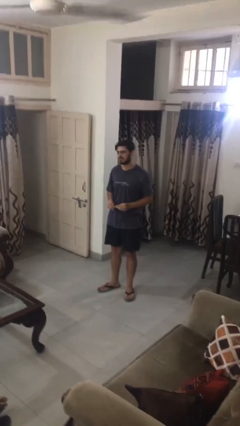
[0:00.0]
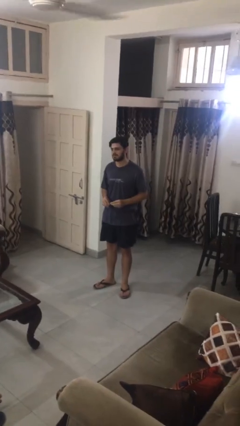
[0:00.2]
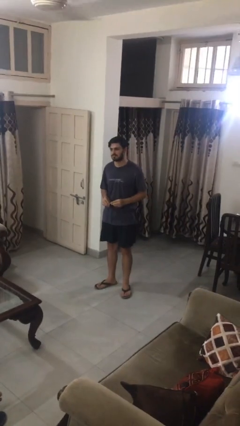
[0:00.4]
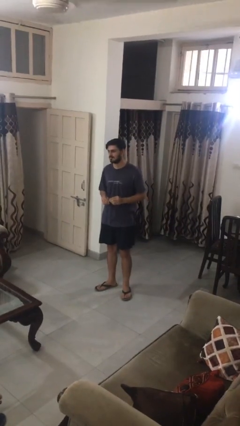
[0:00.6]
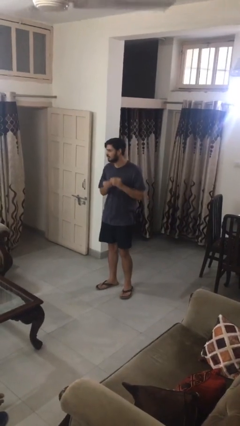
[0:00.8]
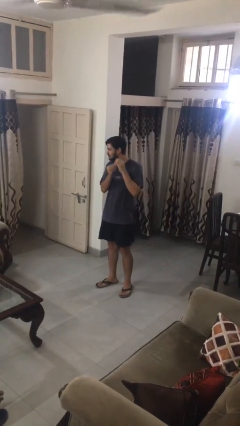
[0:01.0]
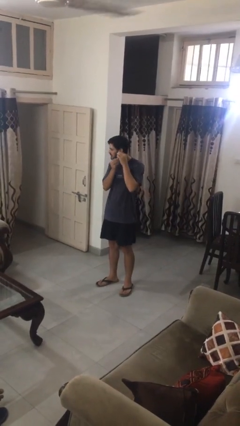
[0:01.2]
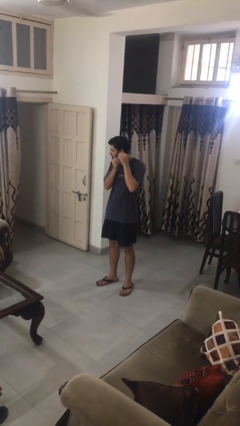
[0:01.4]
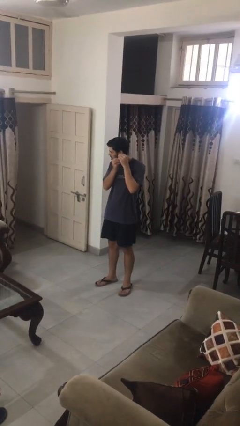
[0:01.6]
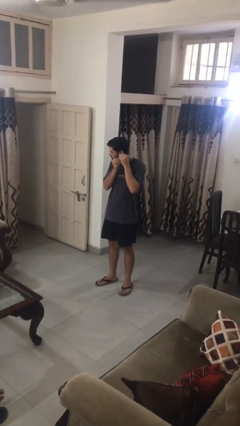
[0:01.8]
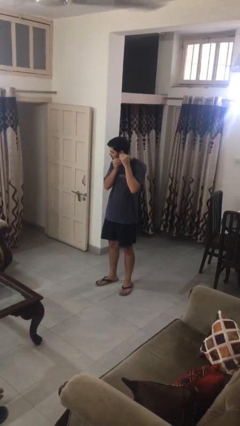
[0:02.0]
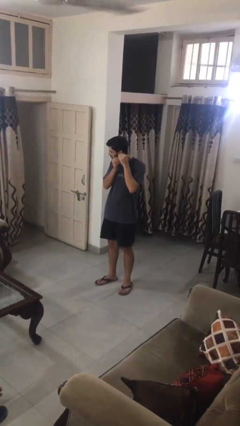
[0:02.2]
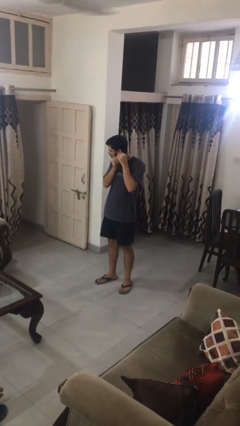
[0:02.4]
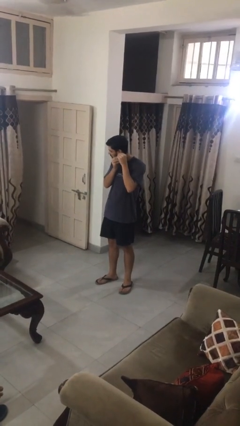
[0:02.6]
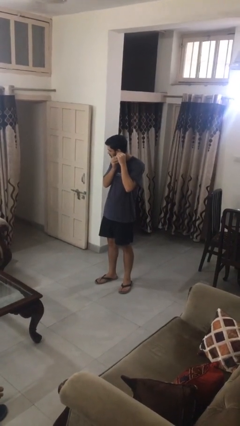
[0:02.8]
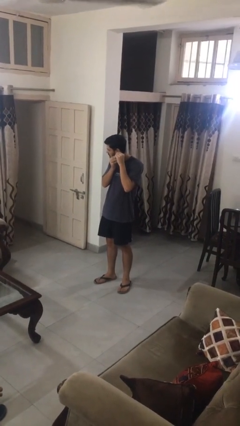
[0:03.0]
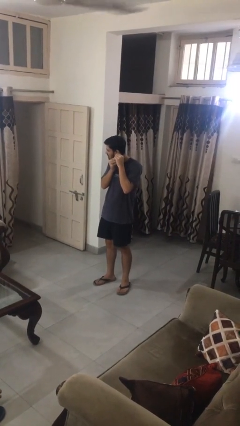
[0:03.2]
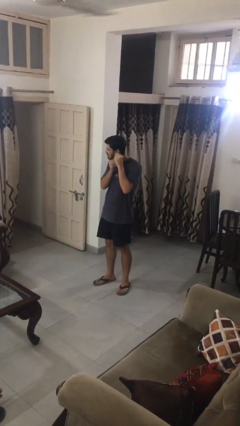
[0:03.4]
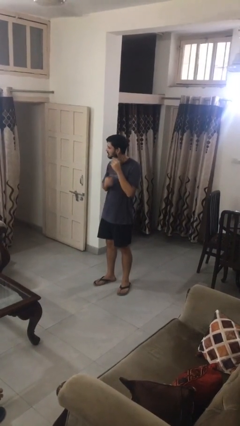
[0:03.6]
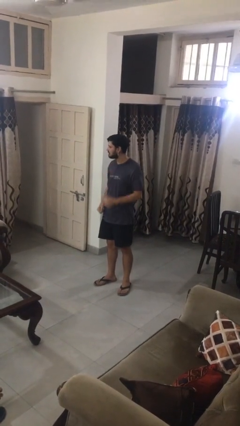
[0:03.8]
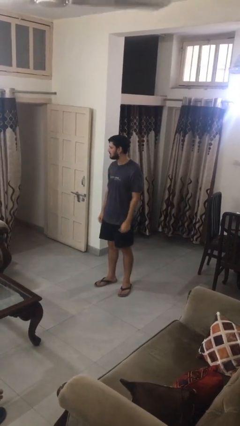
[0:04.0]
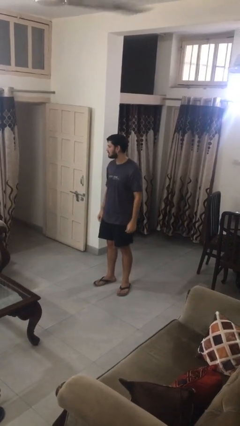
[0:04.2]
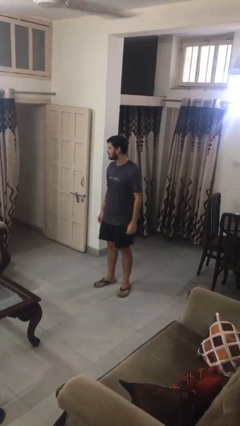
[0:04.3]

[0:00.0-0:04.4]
person puts on earrings

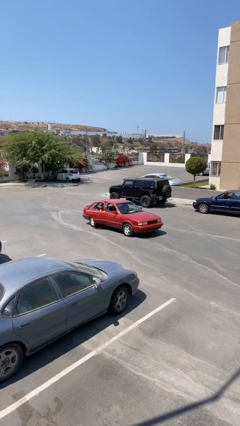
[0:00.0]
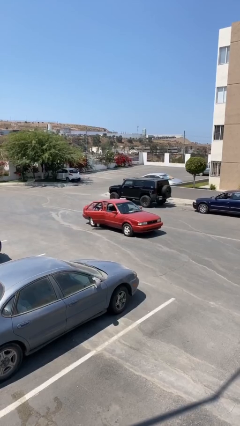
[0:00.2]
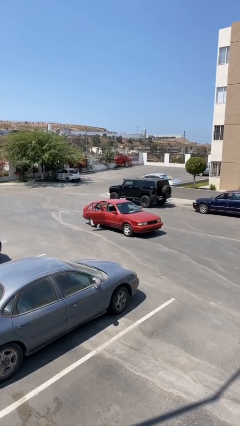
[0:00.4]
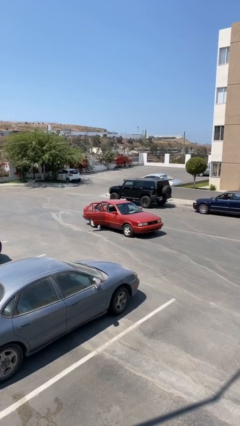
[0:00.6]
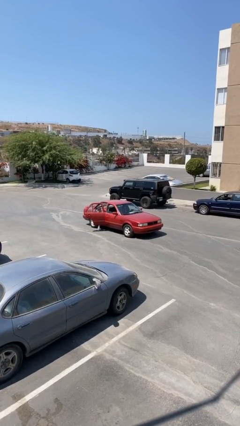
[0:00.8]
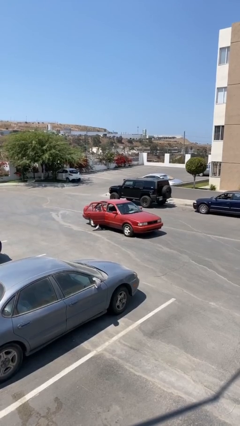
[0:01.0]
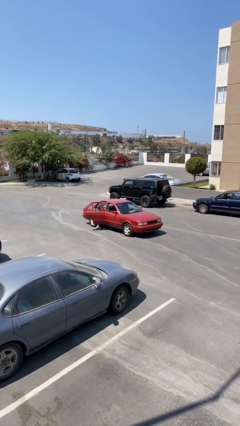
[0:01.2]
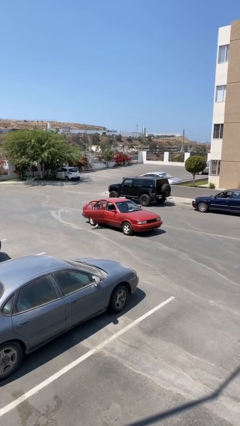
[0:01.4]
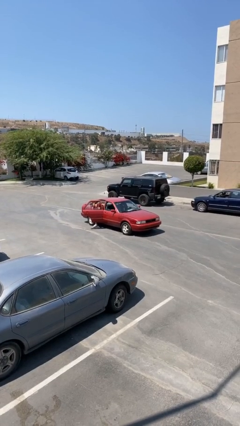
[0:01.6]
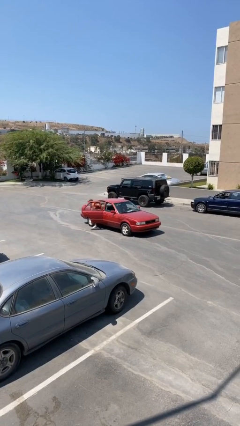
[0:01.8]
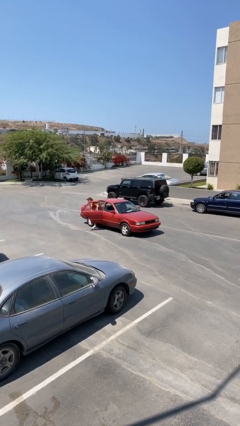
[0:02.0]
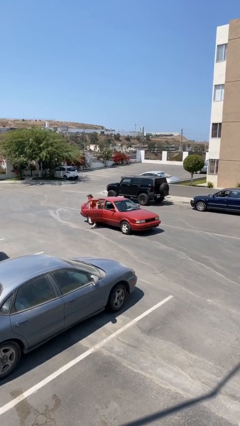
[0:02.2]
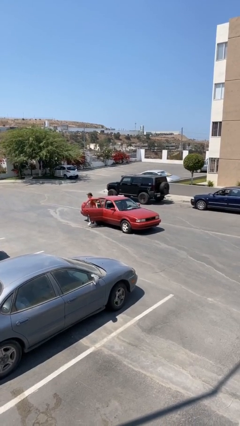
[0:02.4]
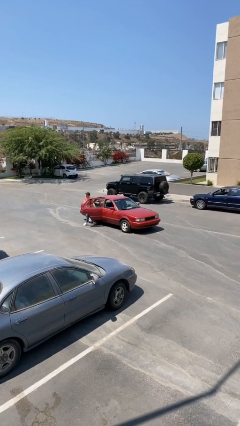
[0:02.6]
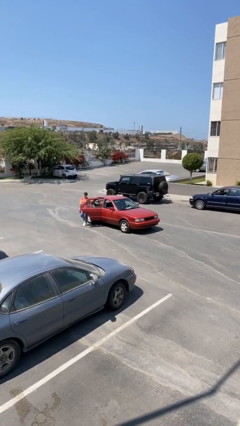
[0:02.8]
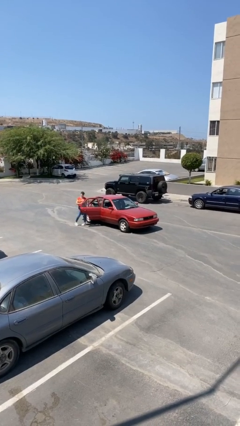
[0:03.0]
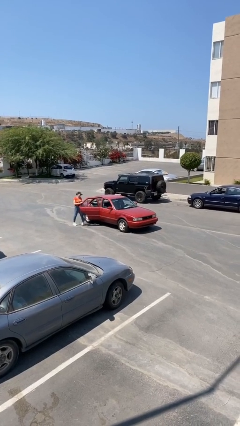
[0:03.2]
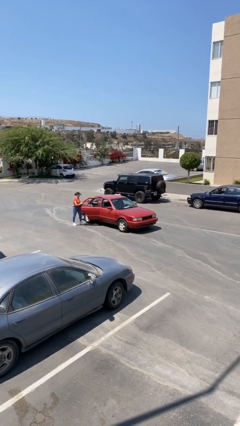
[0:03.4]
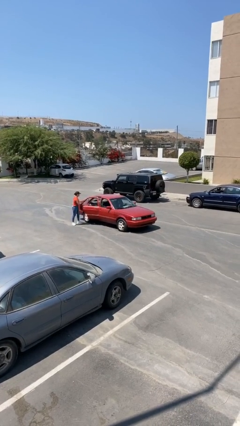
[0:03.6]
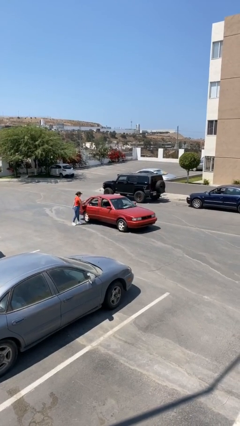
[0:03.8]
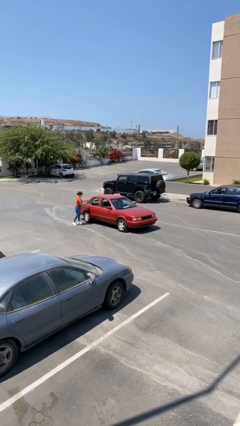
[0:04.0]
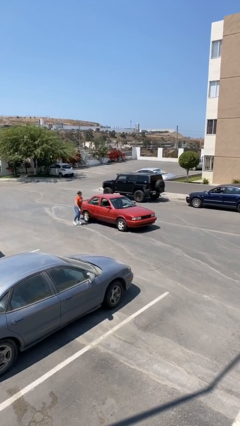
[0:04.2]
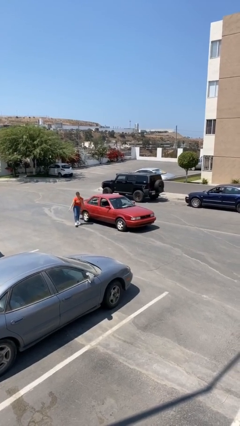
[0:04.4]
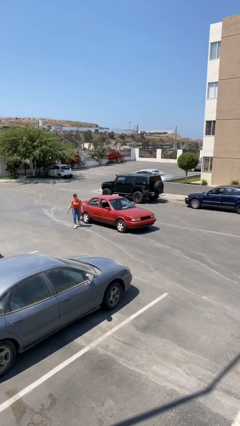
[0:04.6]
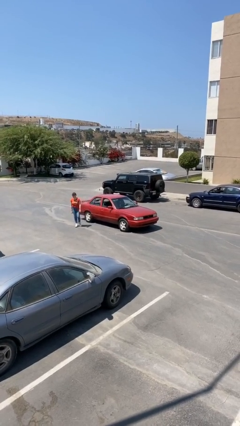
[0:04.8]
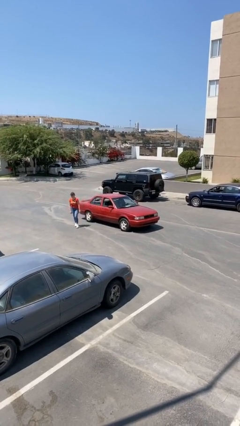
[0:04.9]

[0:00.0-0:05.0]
car drops off person

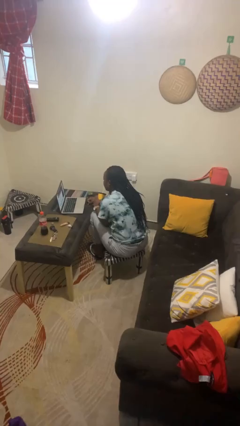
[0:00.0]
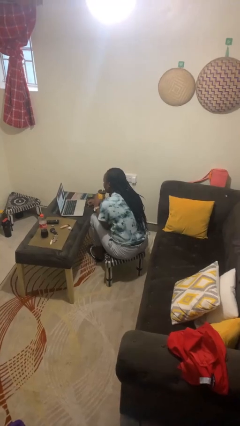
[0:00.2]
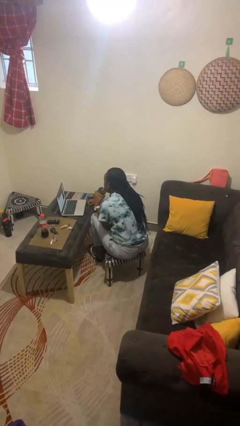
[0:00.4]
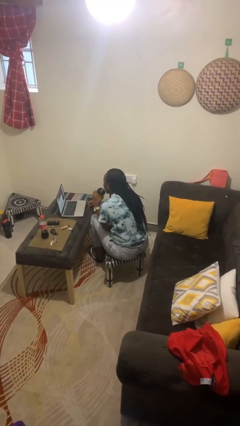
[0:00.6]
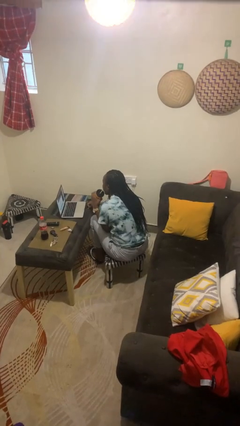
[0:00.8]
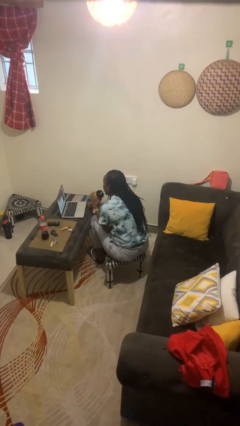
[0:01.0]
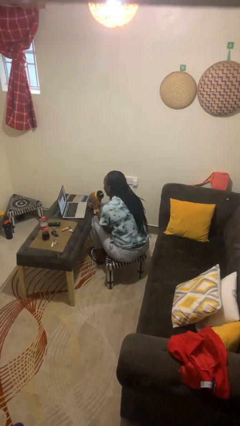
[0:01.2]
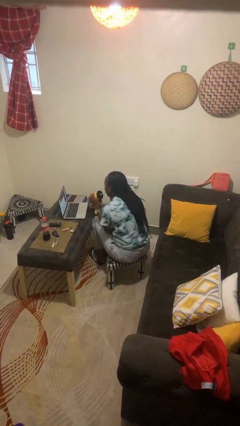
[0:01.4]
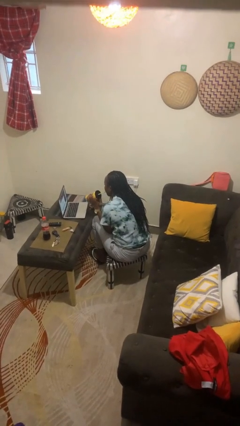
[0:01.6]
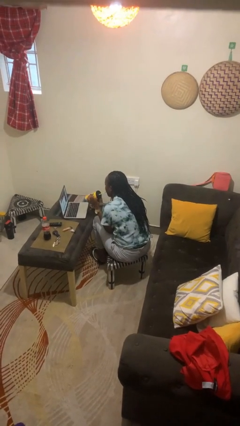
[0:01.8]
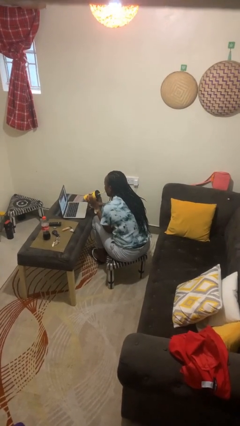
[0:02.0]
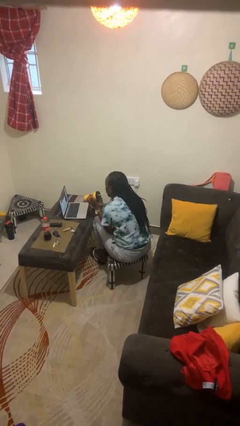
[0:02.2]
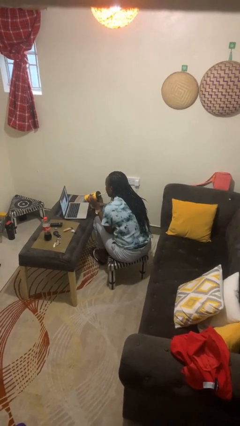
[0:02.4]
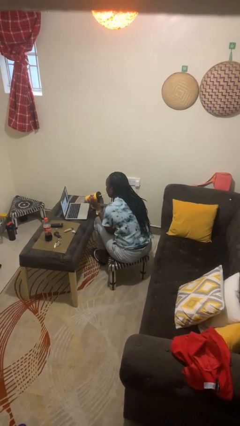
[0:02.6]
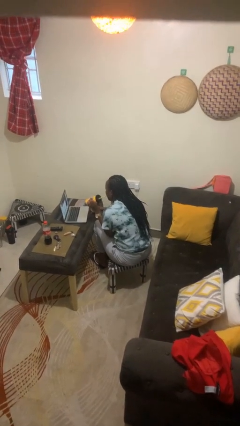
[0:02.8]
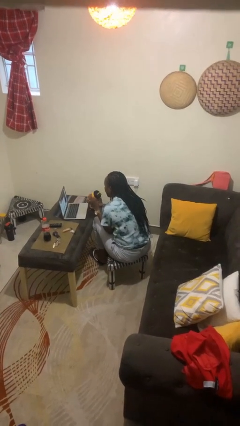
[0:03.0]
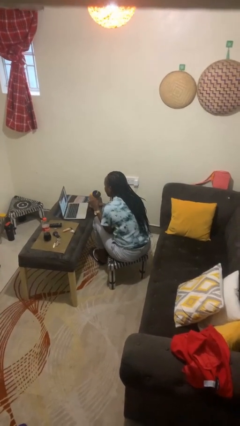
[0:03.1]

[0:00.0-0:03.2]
person drinks from straw

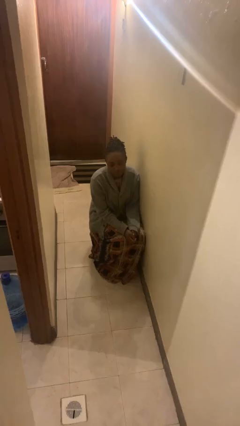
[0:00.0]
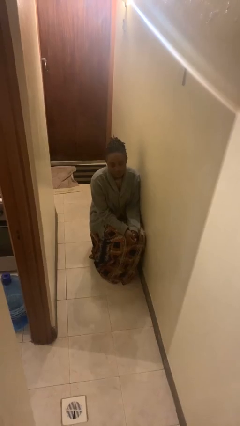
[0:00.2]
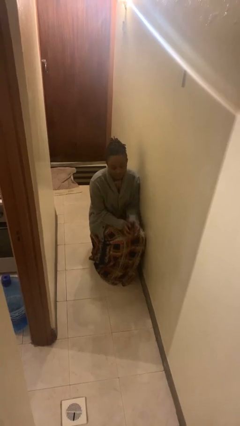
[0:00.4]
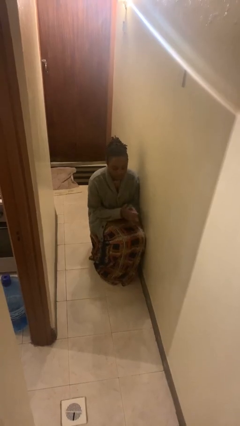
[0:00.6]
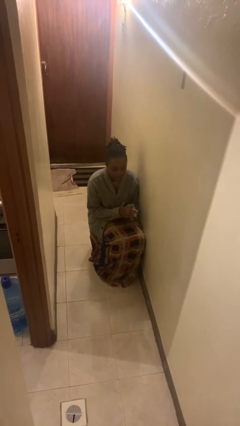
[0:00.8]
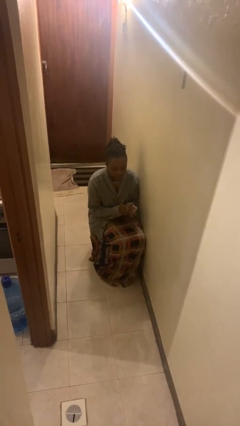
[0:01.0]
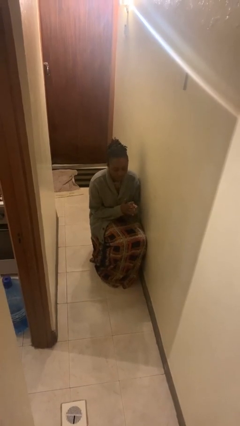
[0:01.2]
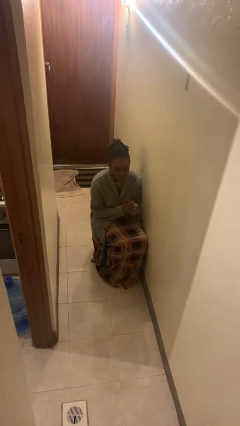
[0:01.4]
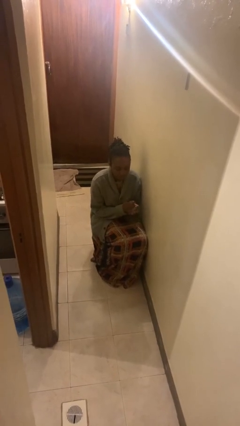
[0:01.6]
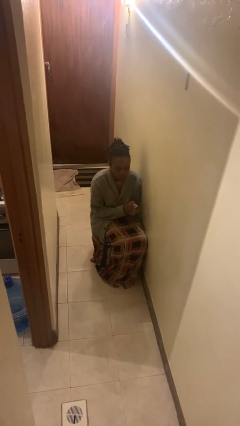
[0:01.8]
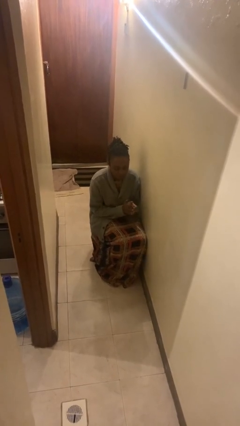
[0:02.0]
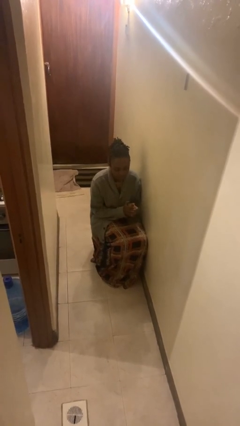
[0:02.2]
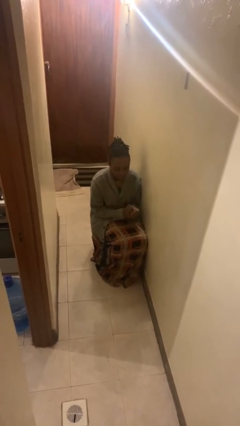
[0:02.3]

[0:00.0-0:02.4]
person claps hands

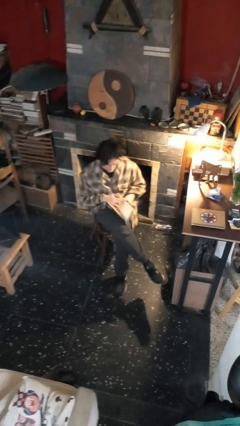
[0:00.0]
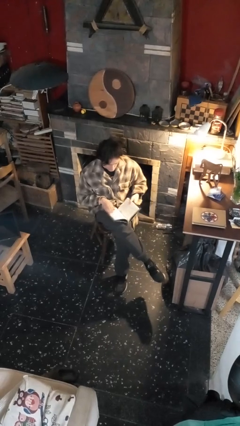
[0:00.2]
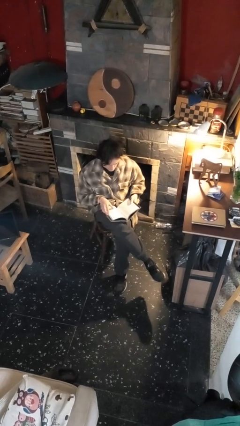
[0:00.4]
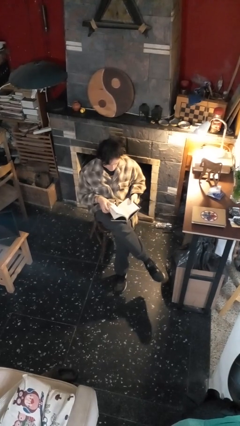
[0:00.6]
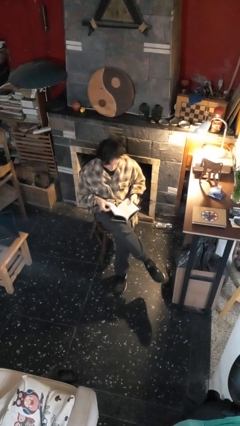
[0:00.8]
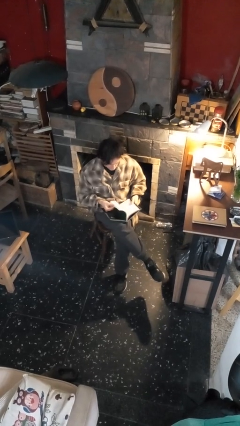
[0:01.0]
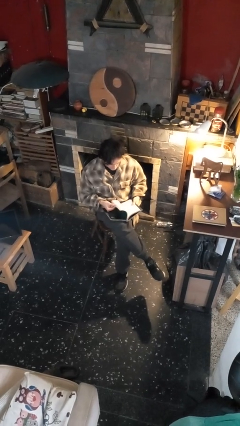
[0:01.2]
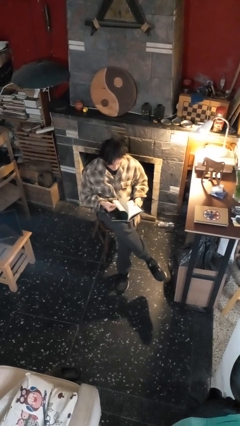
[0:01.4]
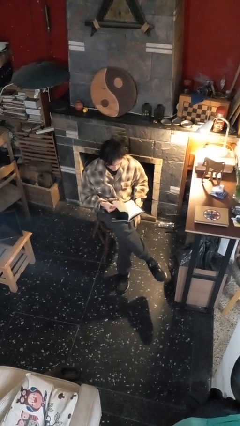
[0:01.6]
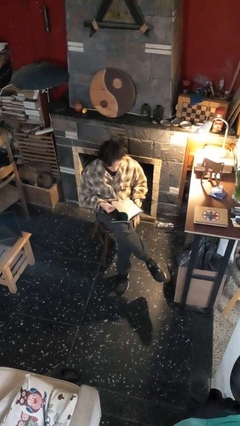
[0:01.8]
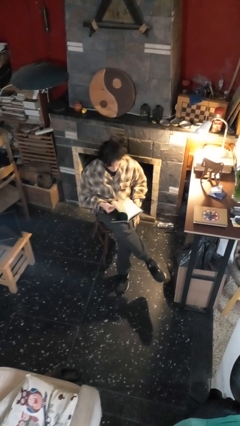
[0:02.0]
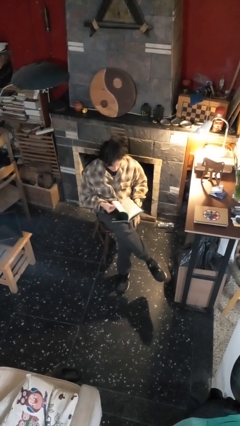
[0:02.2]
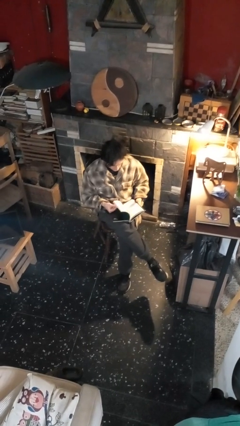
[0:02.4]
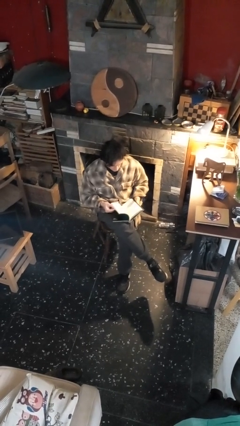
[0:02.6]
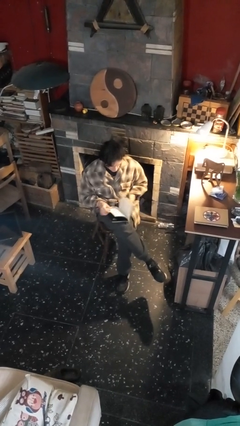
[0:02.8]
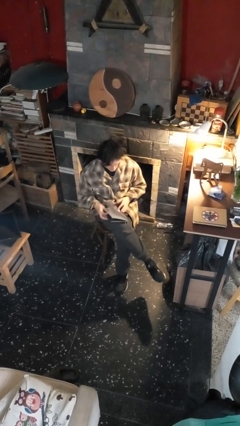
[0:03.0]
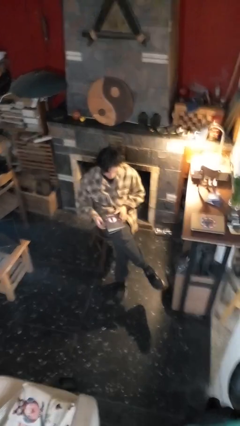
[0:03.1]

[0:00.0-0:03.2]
person reads book
